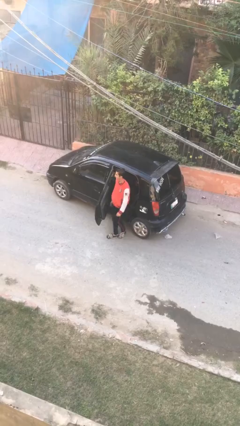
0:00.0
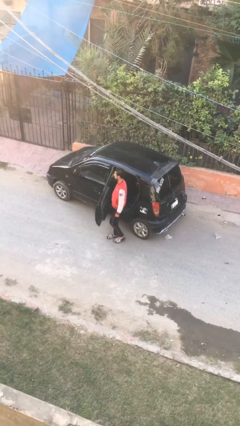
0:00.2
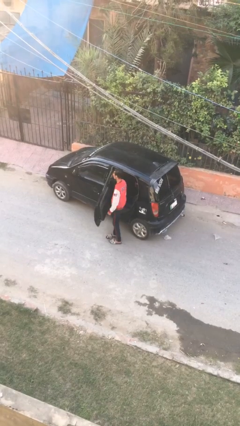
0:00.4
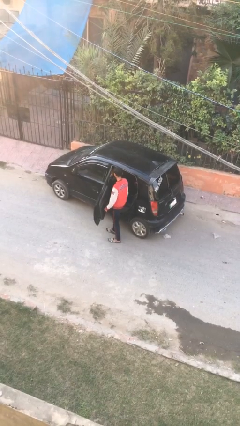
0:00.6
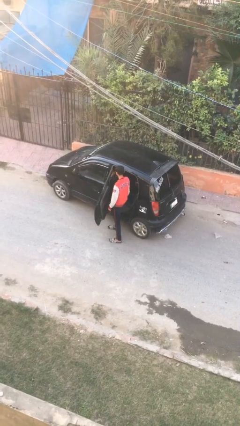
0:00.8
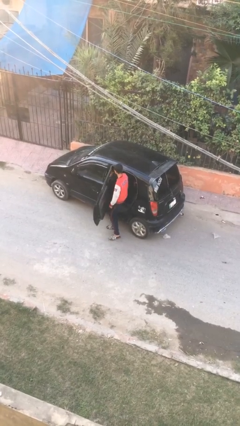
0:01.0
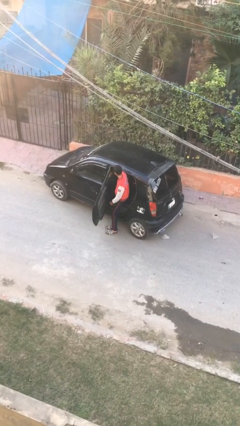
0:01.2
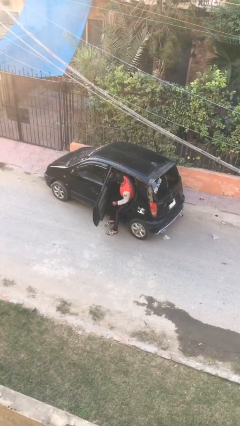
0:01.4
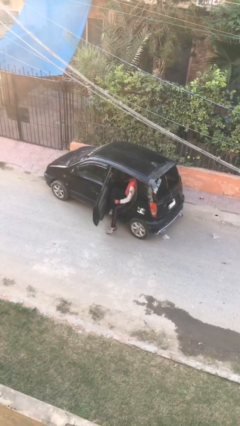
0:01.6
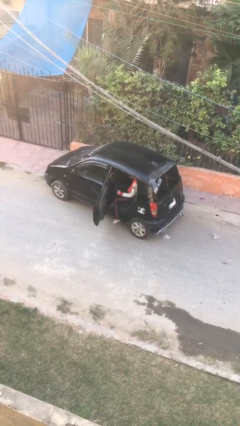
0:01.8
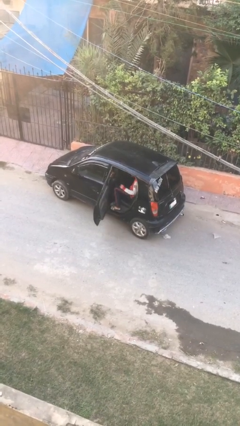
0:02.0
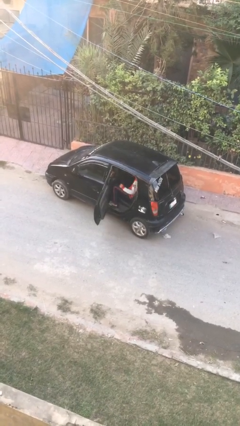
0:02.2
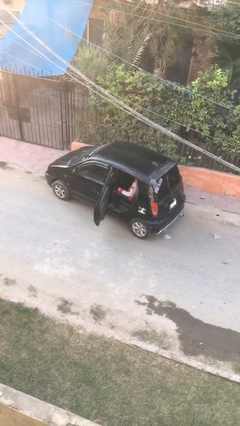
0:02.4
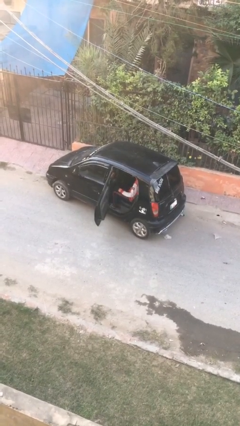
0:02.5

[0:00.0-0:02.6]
person enters car

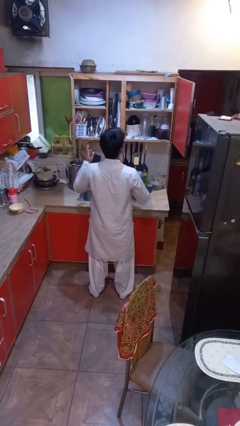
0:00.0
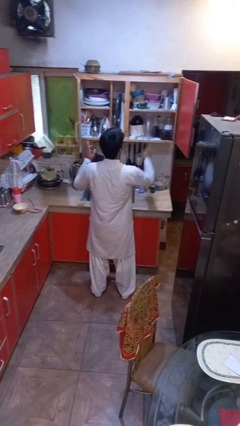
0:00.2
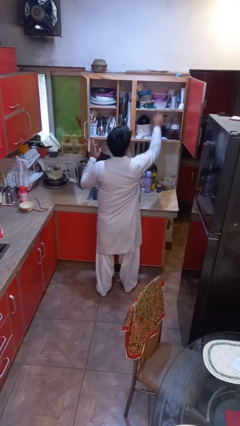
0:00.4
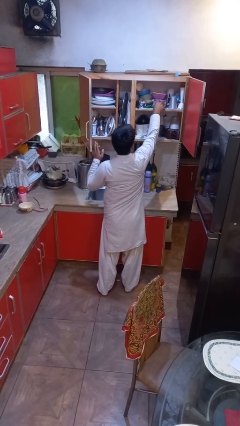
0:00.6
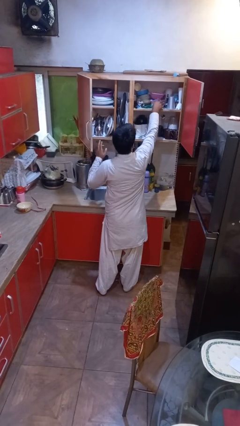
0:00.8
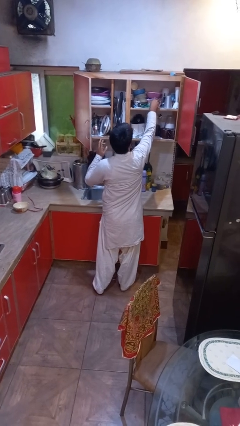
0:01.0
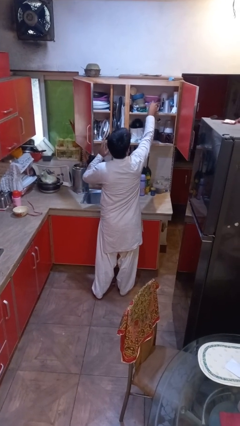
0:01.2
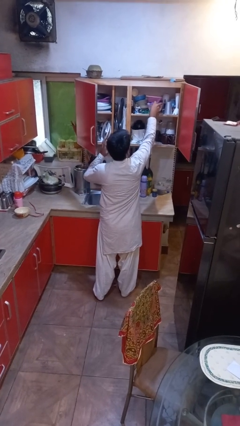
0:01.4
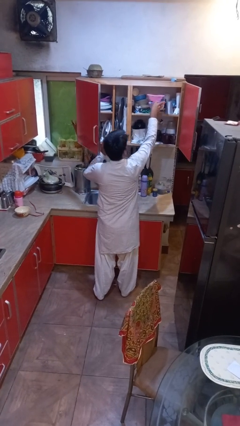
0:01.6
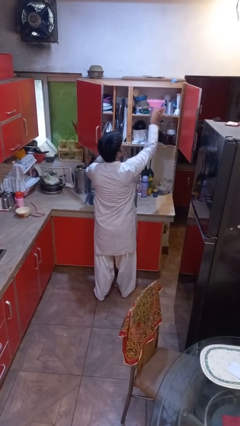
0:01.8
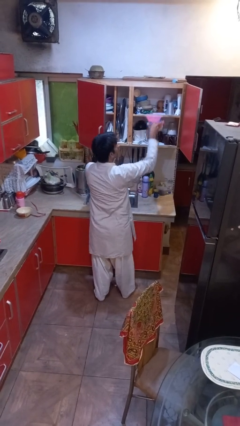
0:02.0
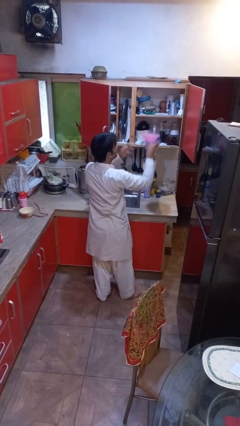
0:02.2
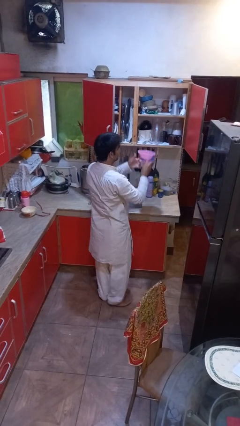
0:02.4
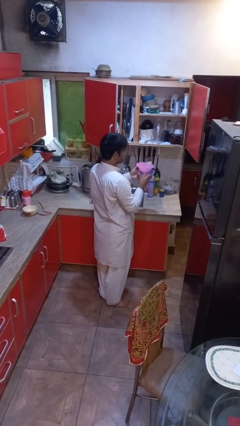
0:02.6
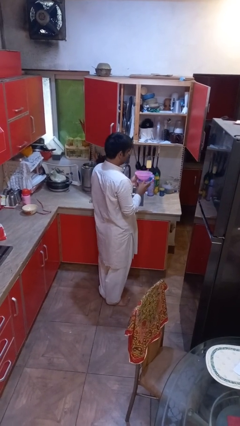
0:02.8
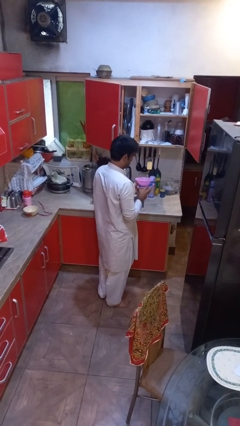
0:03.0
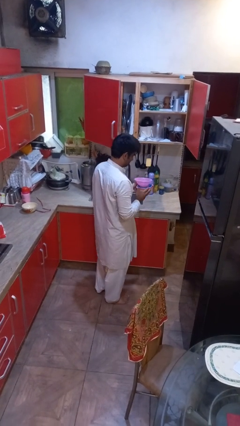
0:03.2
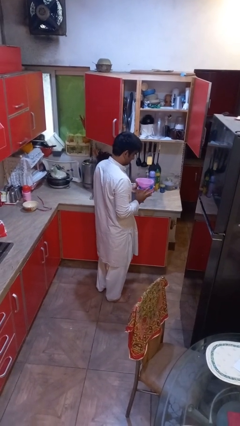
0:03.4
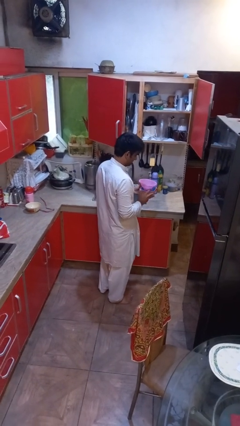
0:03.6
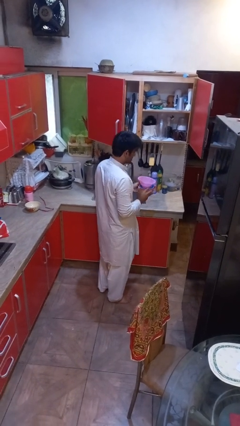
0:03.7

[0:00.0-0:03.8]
person picks up object from cabinet

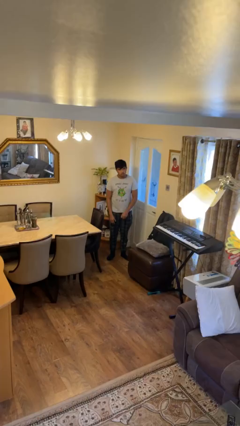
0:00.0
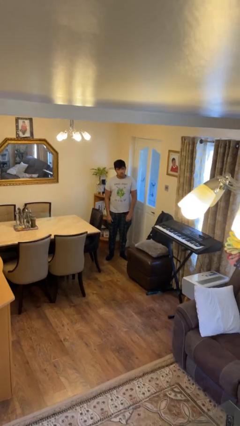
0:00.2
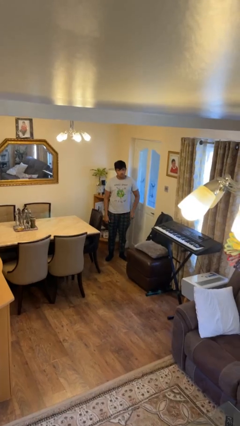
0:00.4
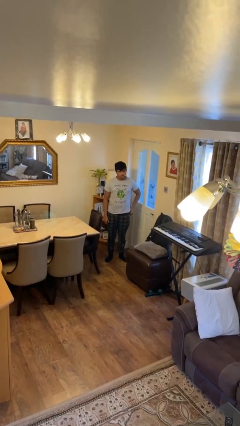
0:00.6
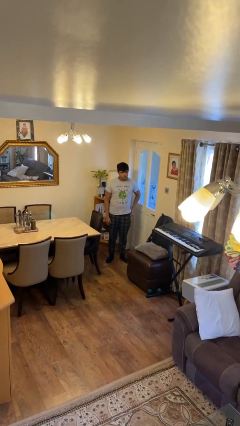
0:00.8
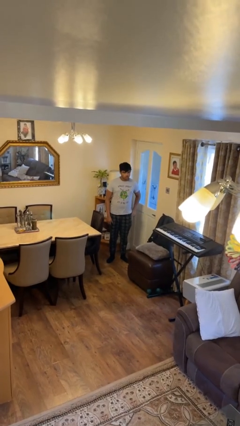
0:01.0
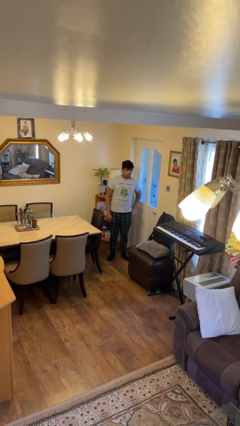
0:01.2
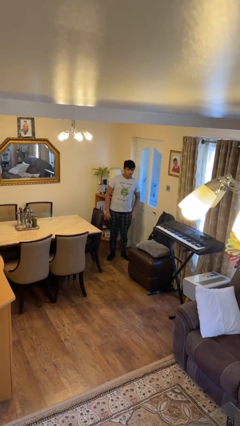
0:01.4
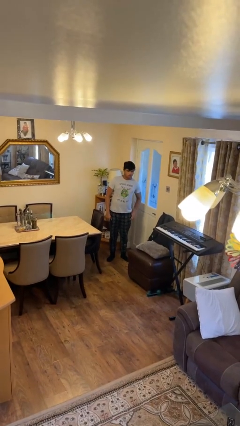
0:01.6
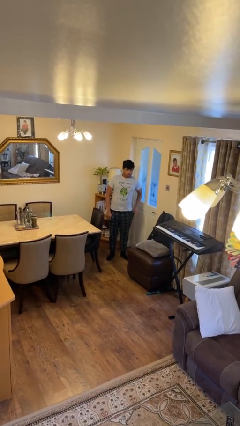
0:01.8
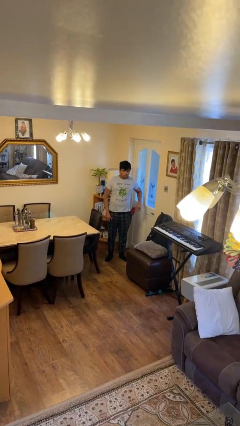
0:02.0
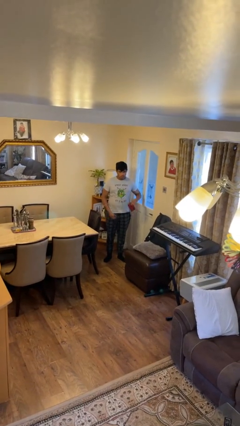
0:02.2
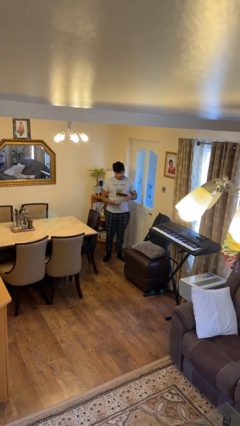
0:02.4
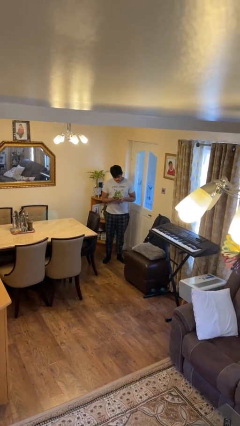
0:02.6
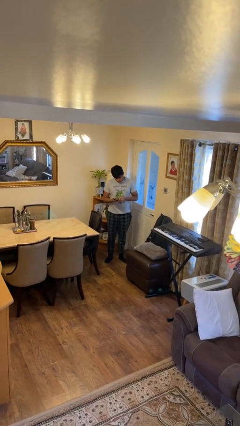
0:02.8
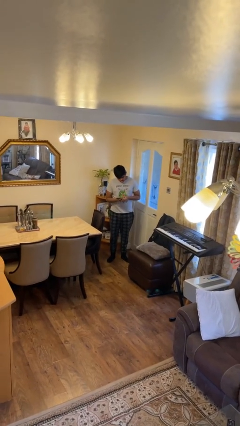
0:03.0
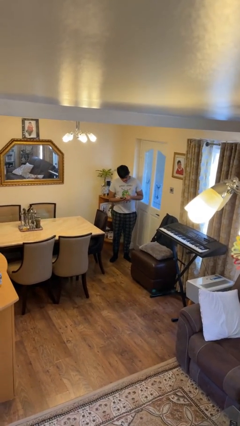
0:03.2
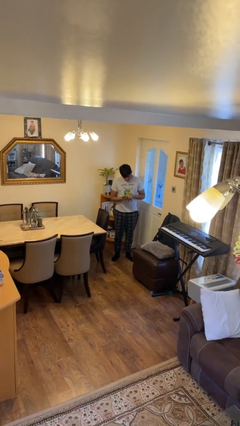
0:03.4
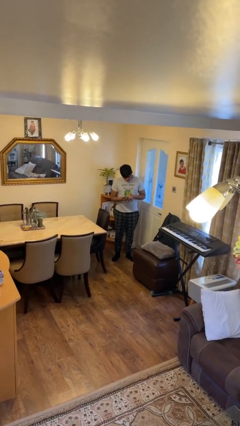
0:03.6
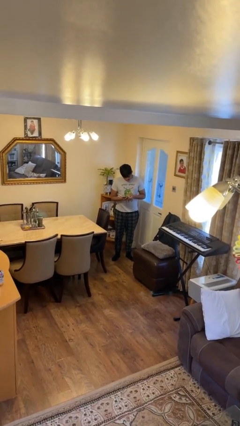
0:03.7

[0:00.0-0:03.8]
person takes phone from pocket

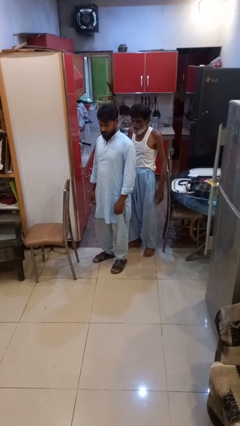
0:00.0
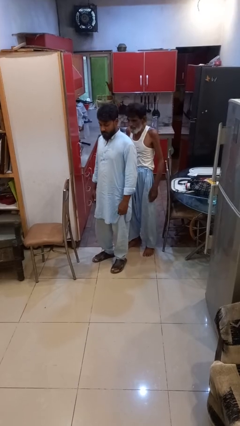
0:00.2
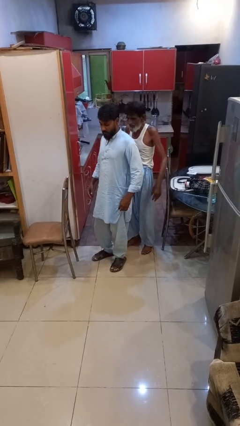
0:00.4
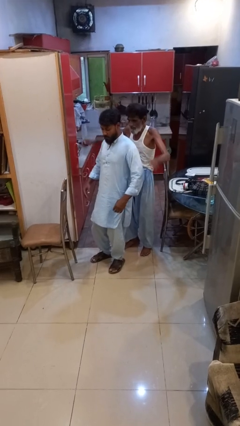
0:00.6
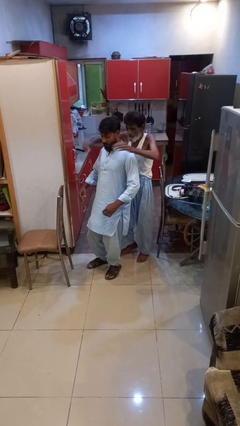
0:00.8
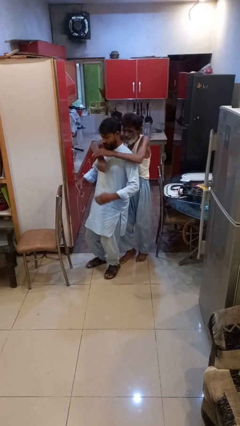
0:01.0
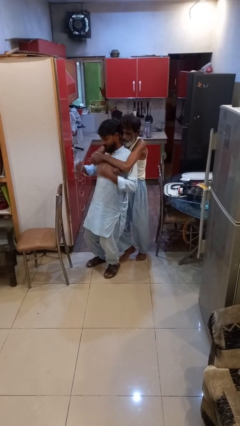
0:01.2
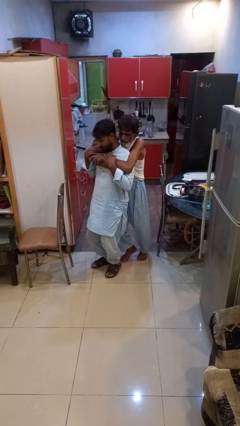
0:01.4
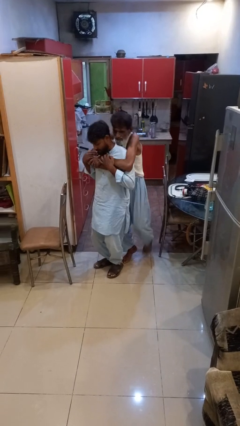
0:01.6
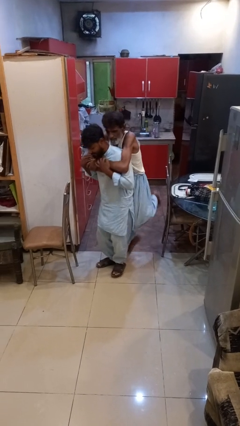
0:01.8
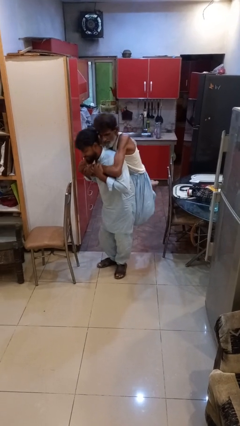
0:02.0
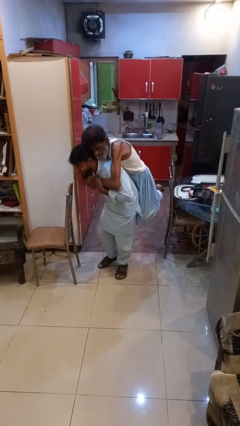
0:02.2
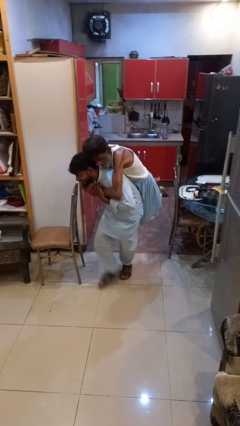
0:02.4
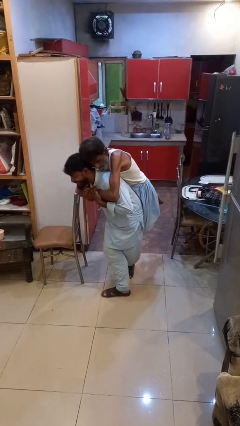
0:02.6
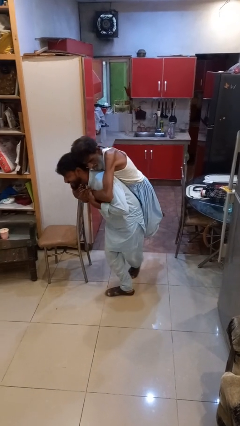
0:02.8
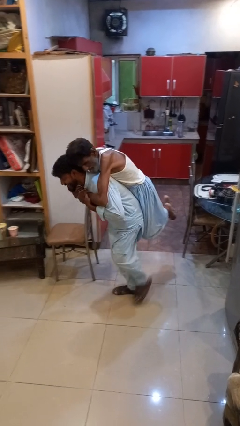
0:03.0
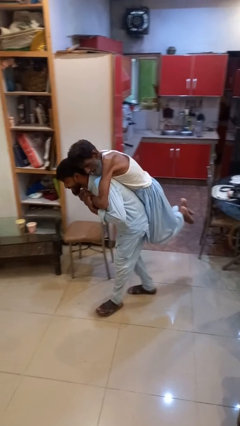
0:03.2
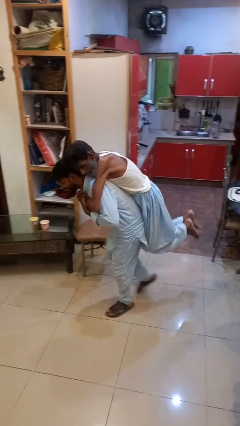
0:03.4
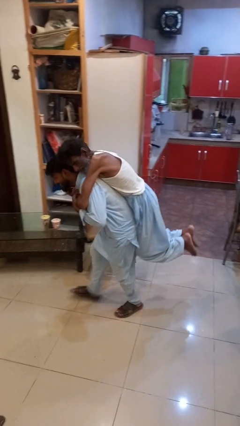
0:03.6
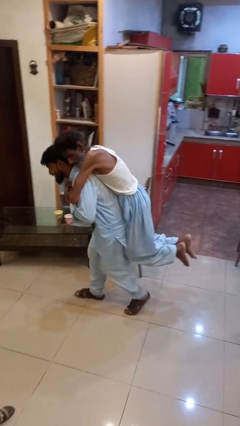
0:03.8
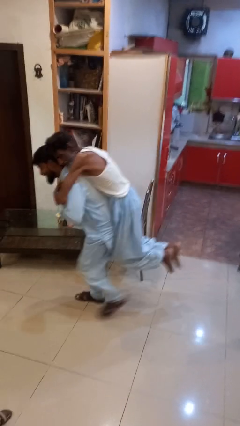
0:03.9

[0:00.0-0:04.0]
person carries person over shoulder

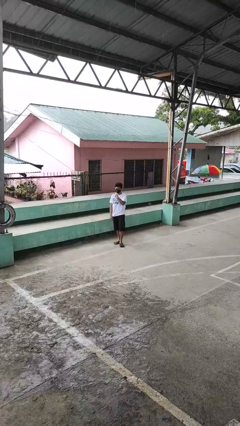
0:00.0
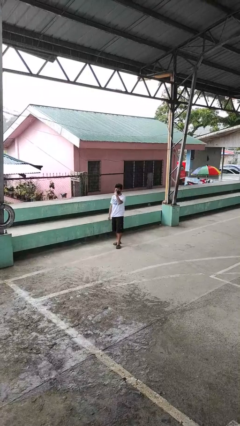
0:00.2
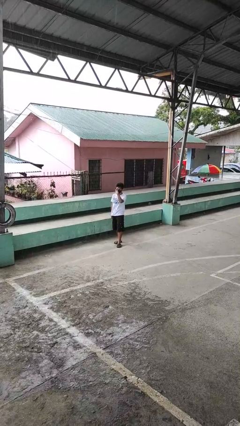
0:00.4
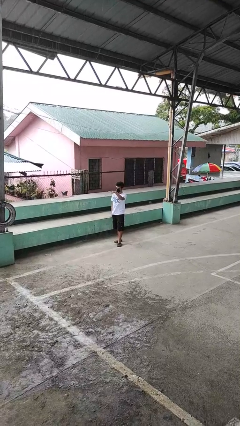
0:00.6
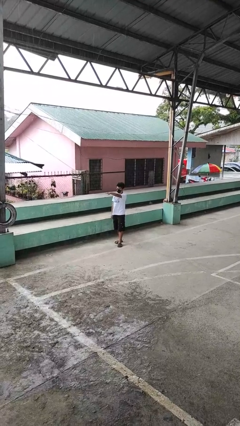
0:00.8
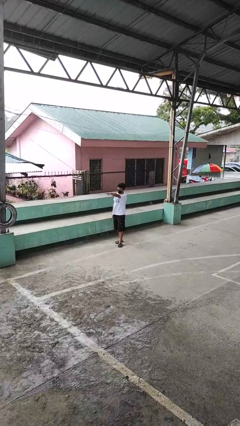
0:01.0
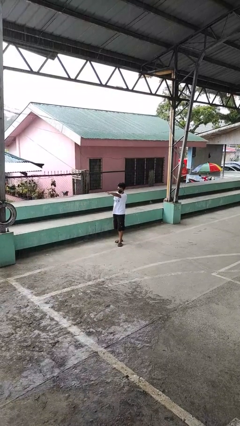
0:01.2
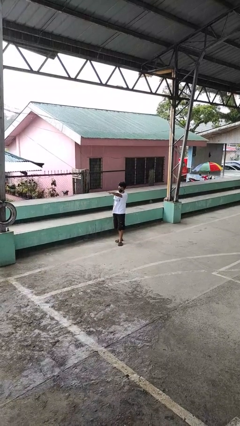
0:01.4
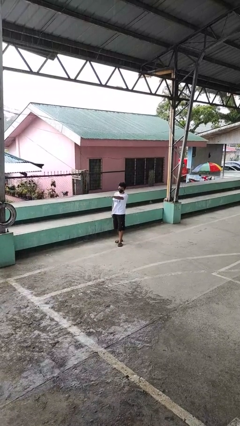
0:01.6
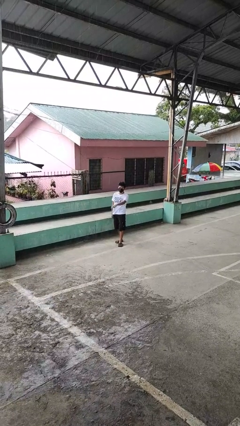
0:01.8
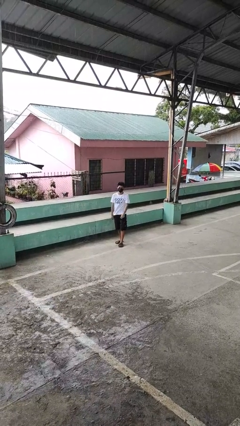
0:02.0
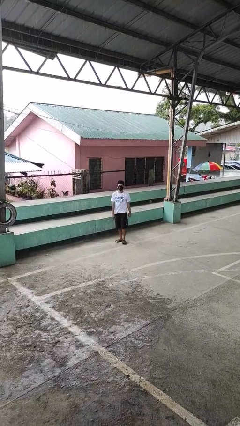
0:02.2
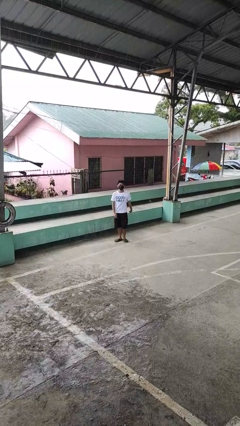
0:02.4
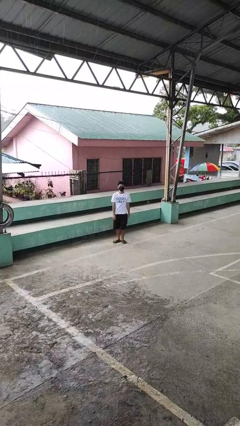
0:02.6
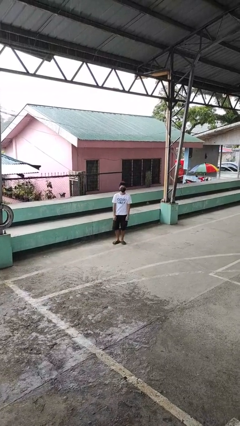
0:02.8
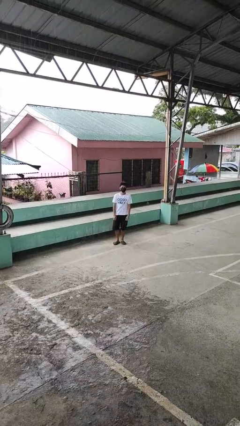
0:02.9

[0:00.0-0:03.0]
person gestures watch closely

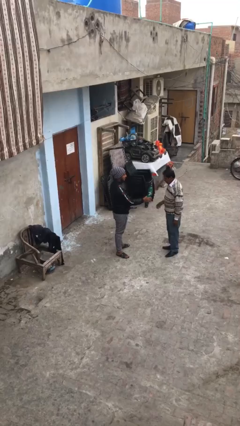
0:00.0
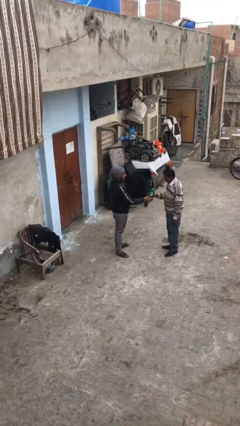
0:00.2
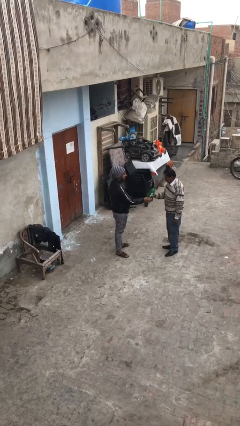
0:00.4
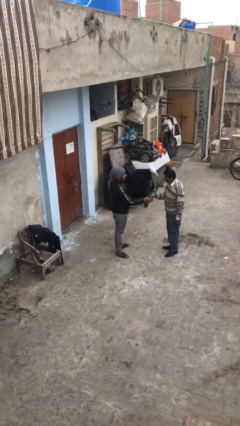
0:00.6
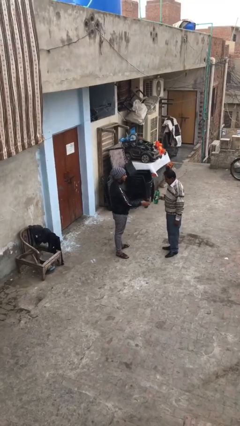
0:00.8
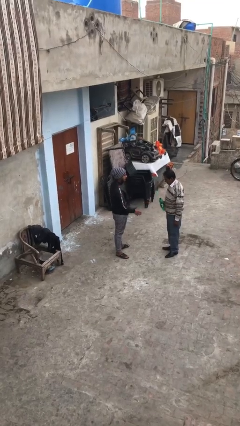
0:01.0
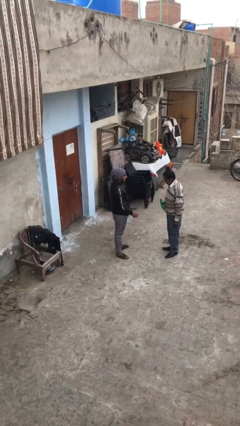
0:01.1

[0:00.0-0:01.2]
person transfers object to person
